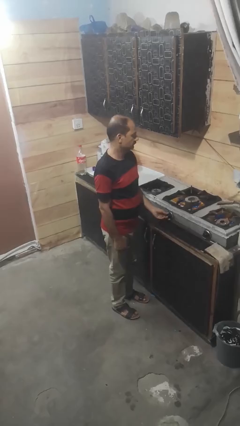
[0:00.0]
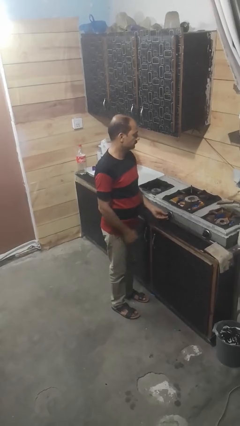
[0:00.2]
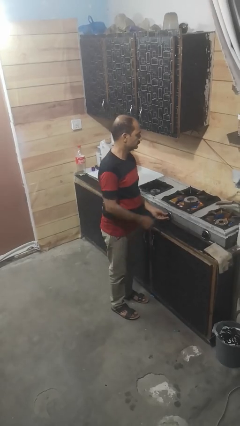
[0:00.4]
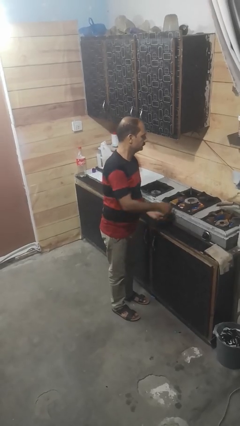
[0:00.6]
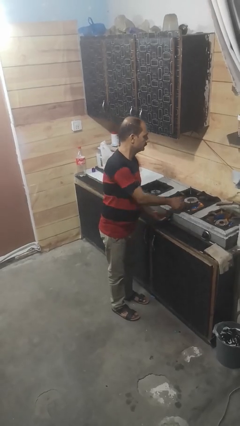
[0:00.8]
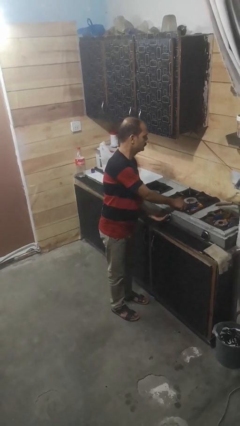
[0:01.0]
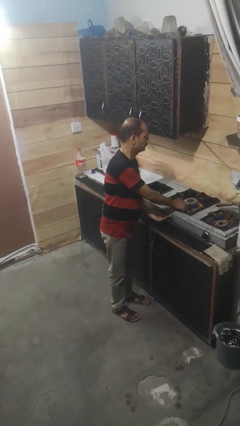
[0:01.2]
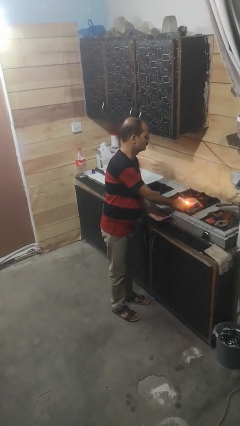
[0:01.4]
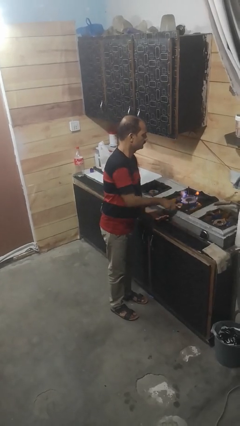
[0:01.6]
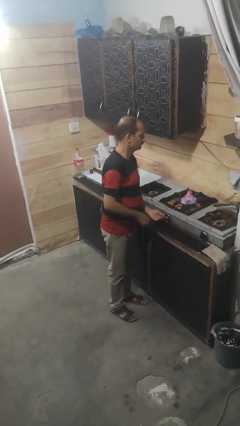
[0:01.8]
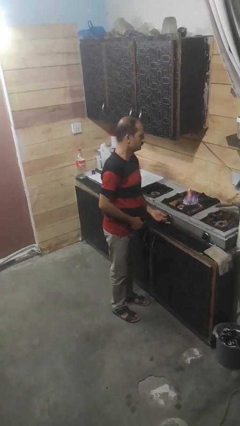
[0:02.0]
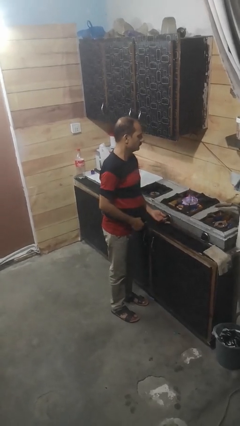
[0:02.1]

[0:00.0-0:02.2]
person turns on stovetop

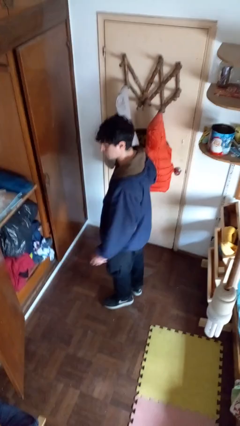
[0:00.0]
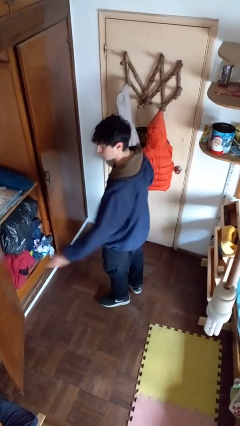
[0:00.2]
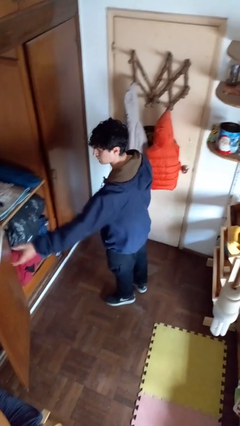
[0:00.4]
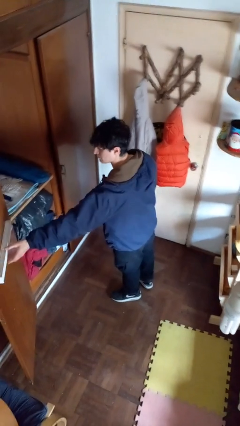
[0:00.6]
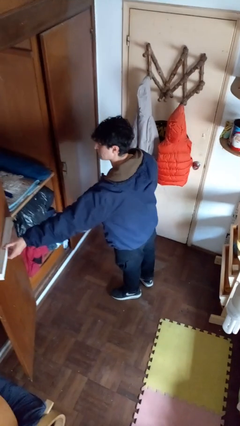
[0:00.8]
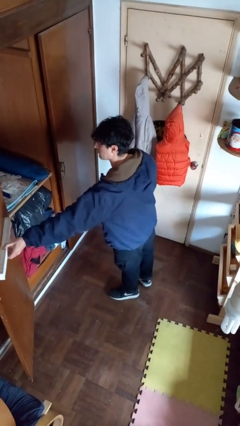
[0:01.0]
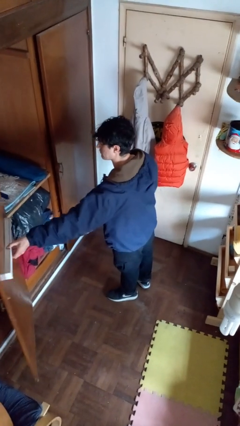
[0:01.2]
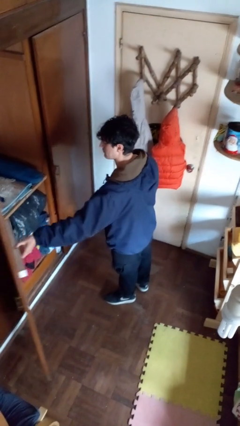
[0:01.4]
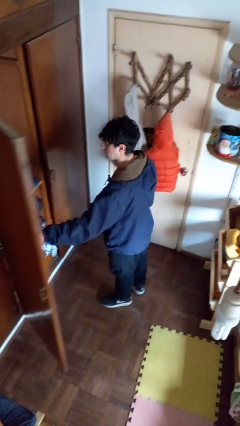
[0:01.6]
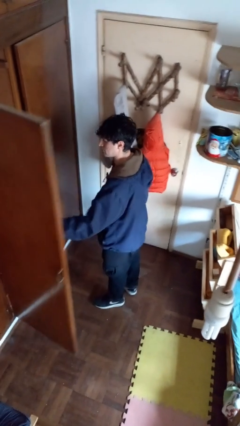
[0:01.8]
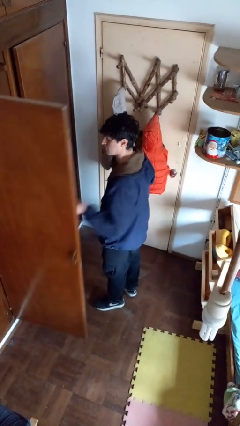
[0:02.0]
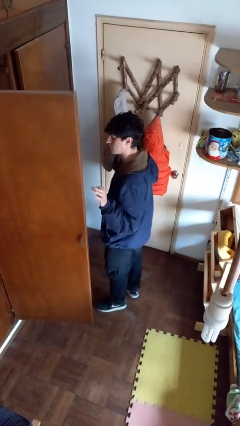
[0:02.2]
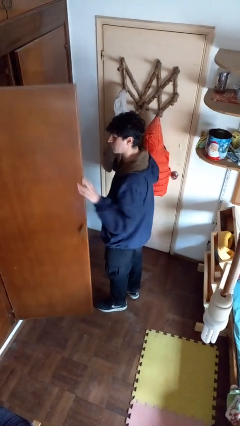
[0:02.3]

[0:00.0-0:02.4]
person closes closet door

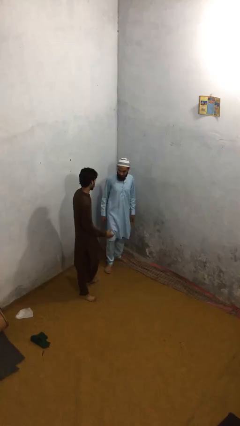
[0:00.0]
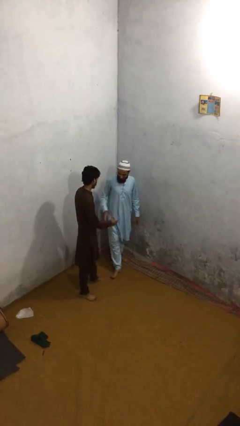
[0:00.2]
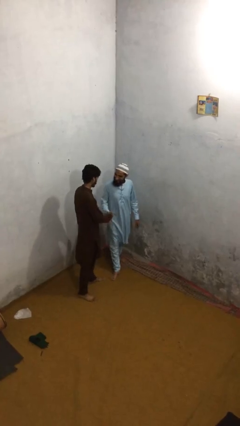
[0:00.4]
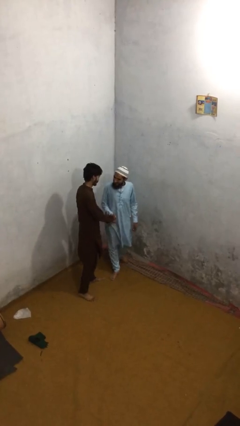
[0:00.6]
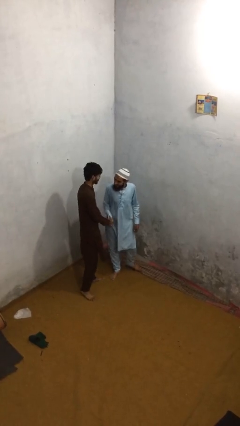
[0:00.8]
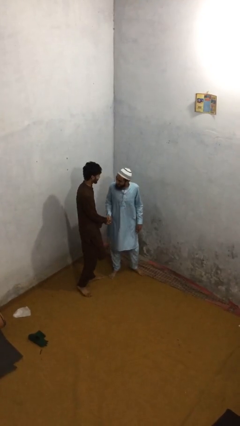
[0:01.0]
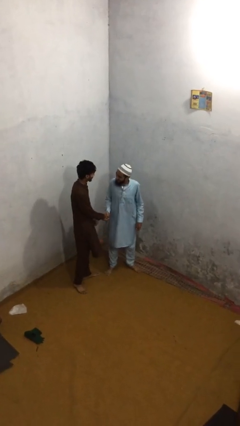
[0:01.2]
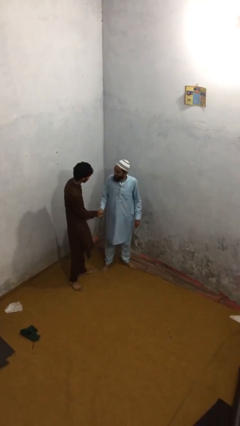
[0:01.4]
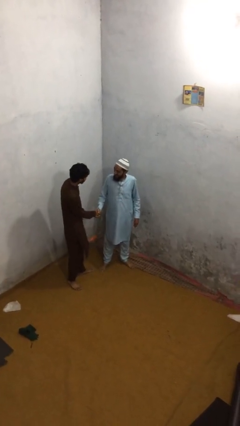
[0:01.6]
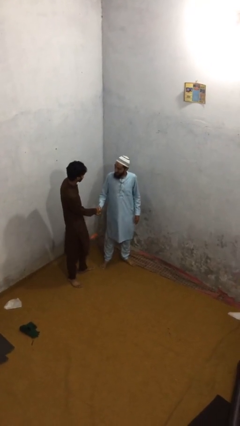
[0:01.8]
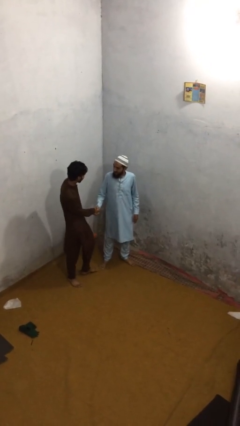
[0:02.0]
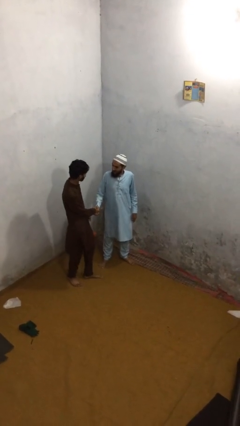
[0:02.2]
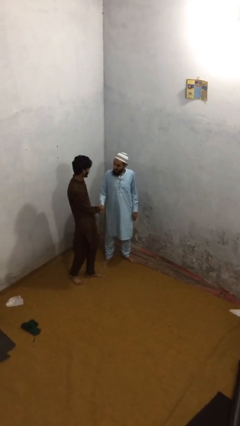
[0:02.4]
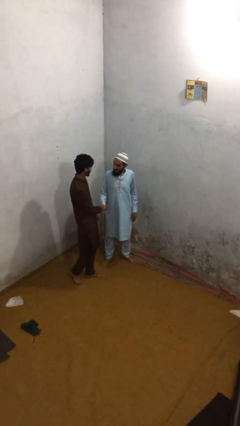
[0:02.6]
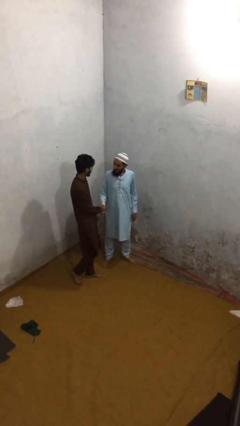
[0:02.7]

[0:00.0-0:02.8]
person shakes hand

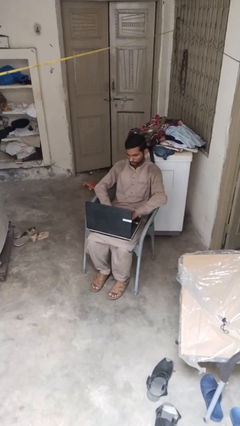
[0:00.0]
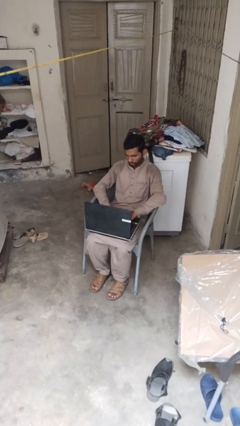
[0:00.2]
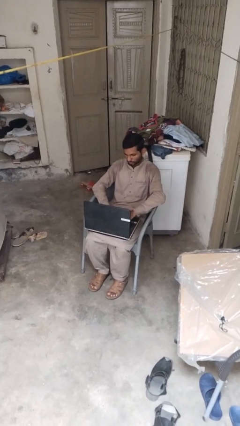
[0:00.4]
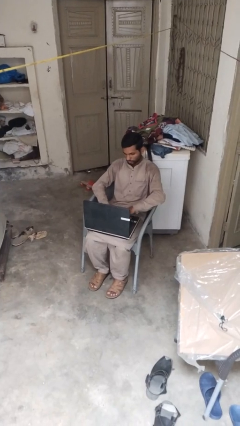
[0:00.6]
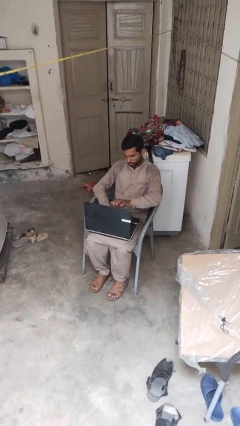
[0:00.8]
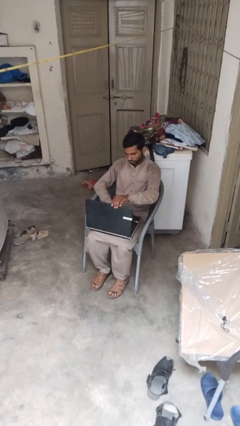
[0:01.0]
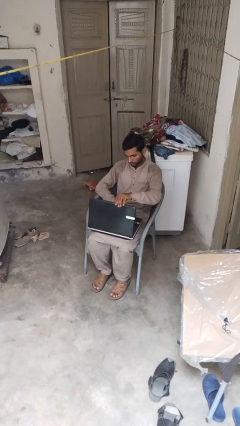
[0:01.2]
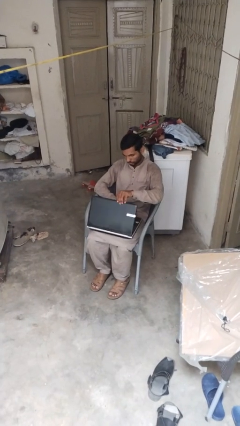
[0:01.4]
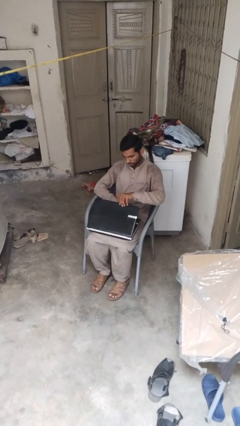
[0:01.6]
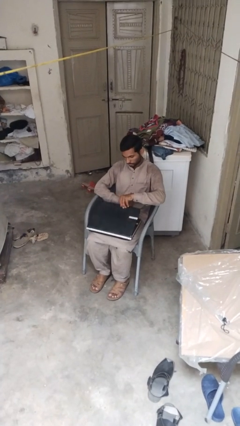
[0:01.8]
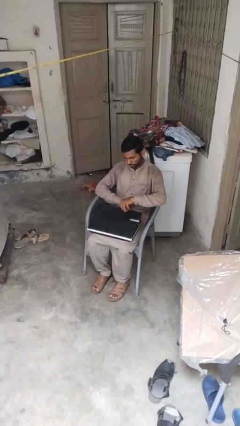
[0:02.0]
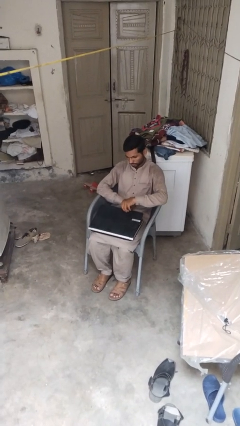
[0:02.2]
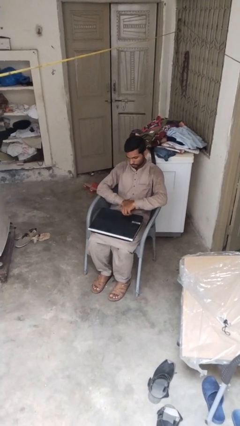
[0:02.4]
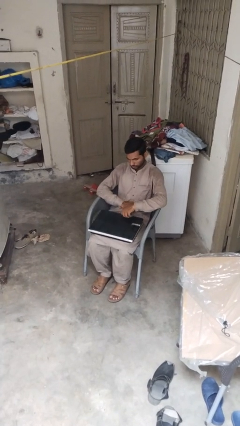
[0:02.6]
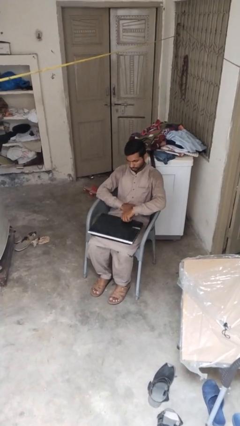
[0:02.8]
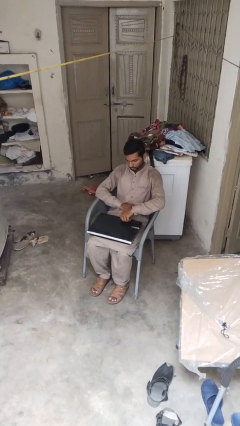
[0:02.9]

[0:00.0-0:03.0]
person closes laptop

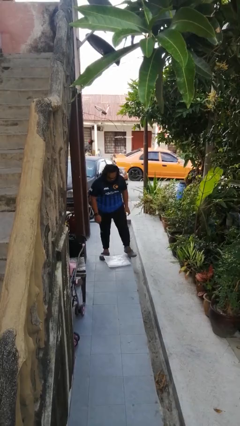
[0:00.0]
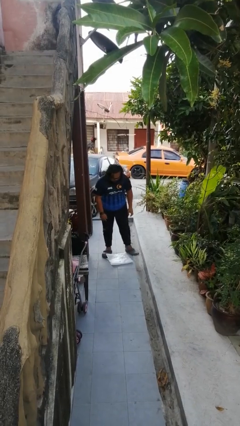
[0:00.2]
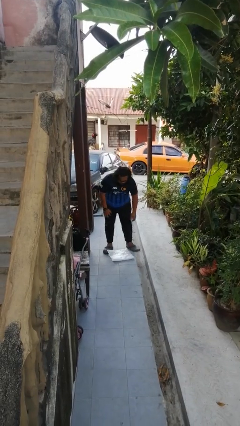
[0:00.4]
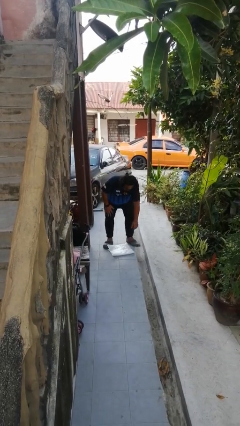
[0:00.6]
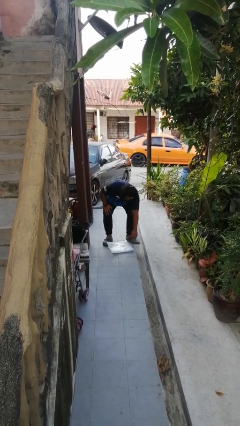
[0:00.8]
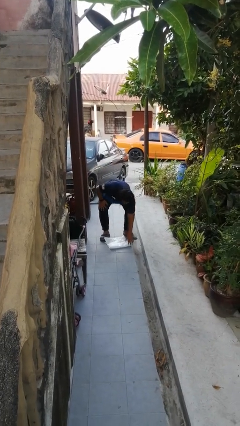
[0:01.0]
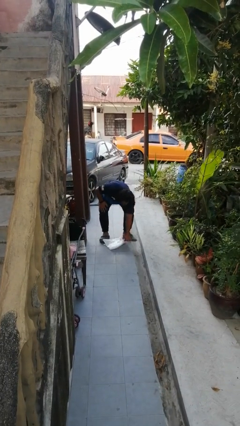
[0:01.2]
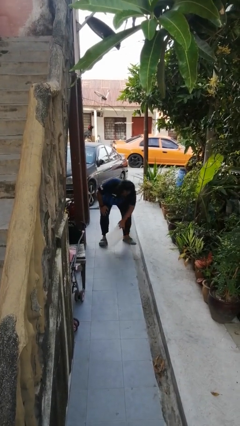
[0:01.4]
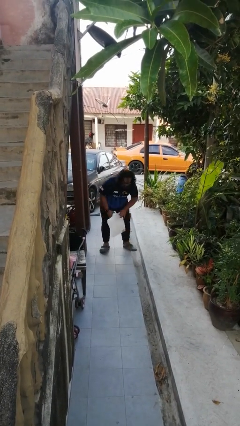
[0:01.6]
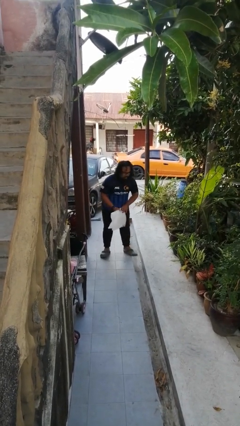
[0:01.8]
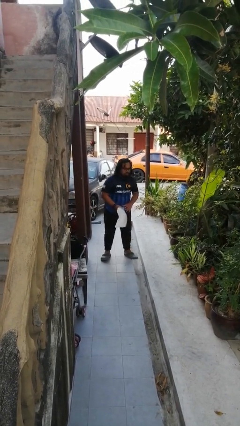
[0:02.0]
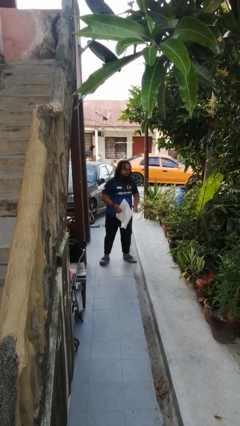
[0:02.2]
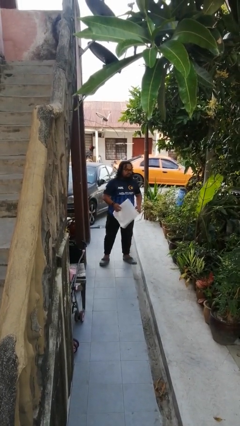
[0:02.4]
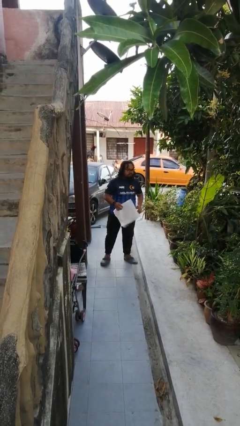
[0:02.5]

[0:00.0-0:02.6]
person picks up object from floor

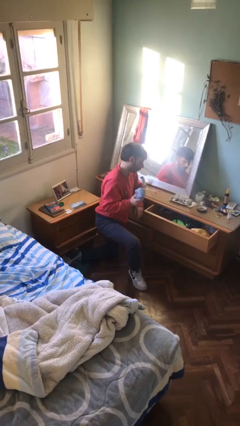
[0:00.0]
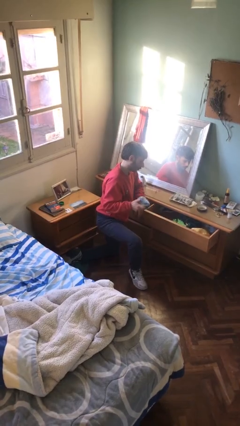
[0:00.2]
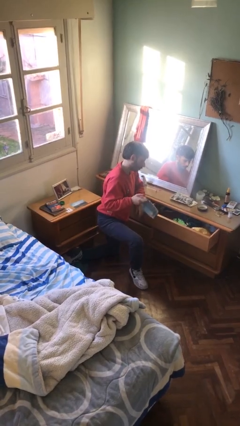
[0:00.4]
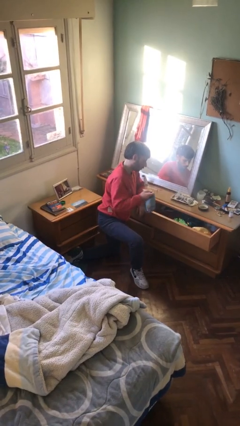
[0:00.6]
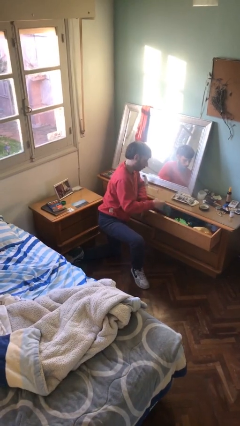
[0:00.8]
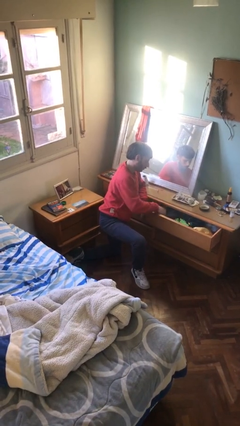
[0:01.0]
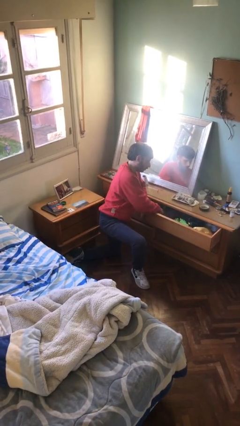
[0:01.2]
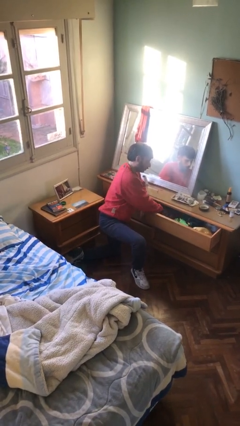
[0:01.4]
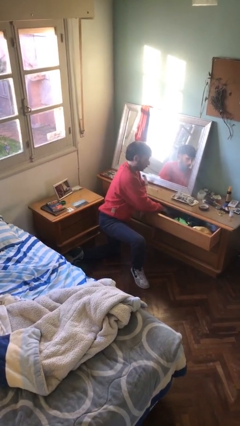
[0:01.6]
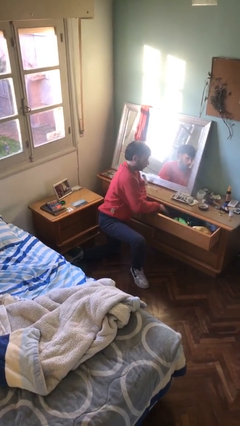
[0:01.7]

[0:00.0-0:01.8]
person puts clothes into dresser

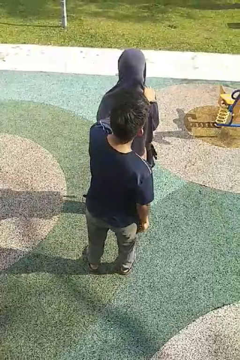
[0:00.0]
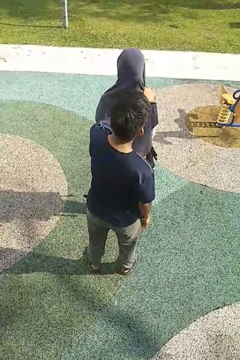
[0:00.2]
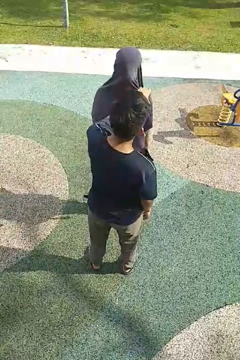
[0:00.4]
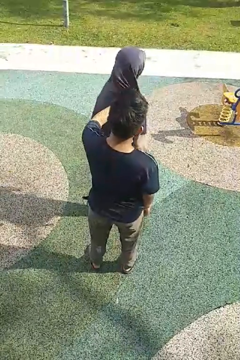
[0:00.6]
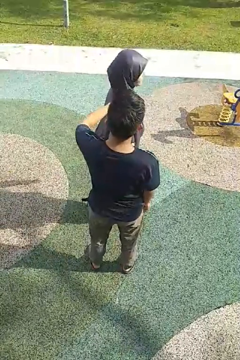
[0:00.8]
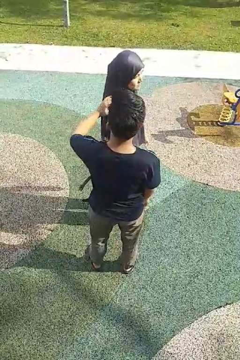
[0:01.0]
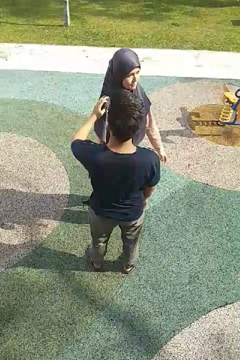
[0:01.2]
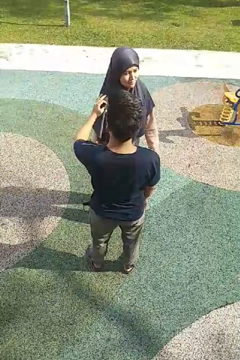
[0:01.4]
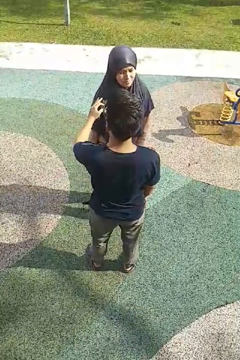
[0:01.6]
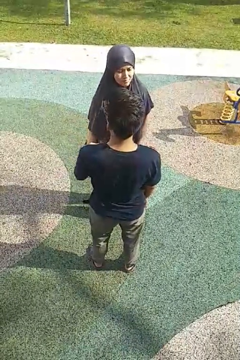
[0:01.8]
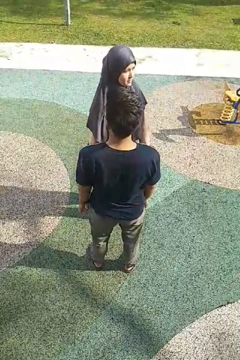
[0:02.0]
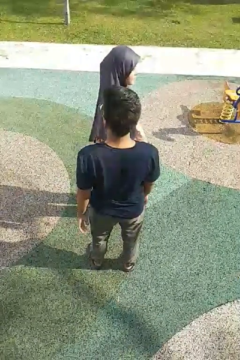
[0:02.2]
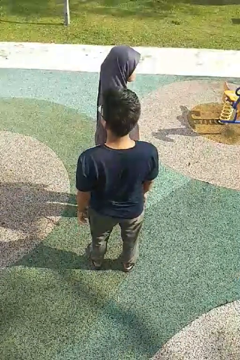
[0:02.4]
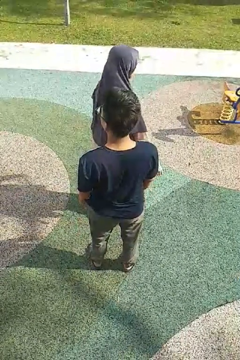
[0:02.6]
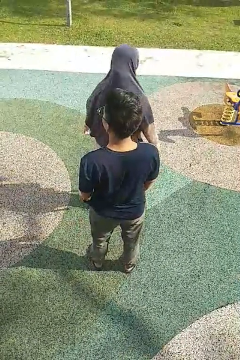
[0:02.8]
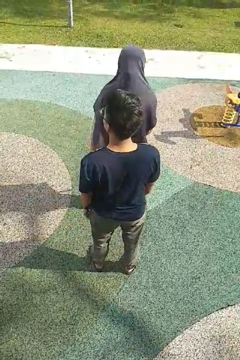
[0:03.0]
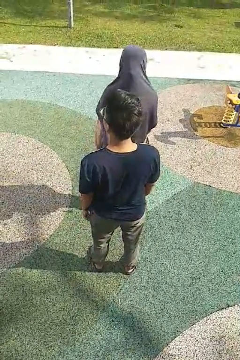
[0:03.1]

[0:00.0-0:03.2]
person spins person around
